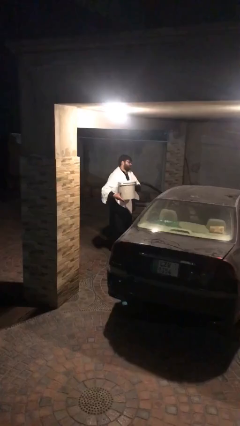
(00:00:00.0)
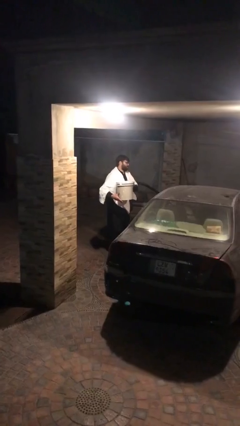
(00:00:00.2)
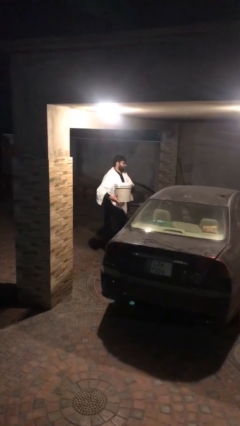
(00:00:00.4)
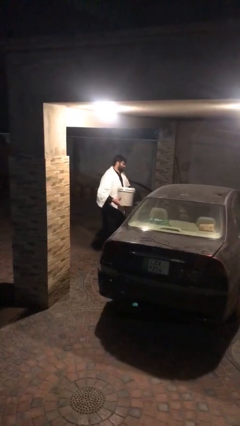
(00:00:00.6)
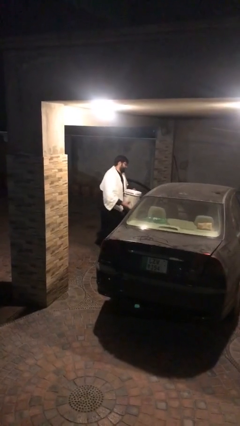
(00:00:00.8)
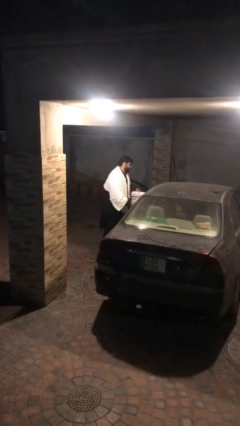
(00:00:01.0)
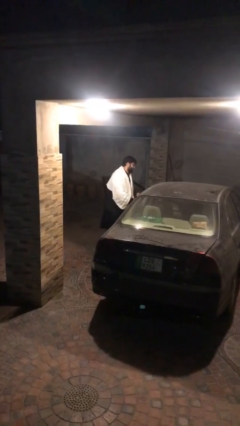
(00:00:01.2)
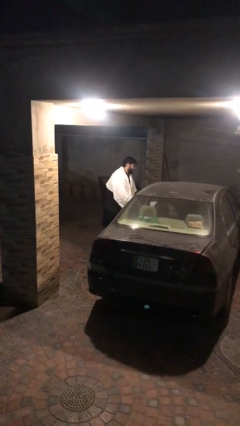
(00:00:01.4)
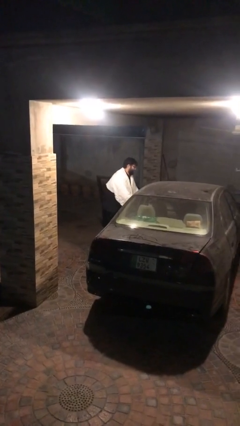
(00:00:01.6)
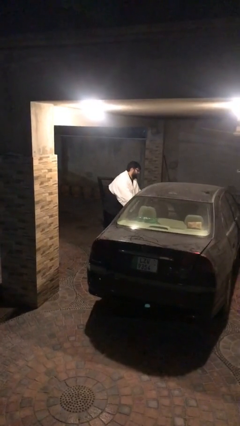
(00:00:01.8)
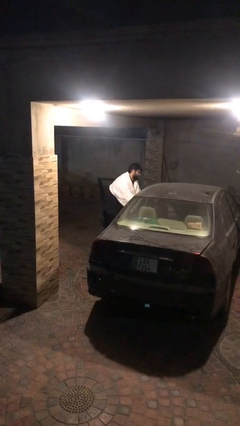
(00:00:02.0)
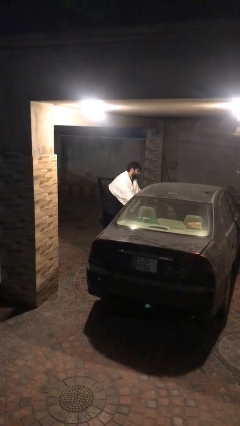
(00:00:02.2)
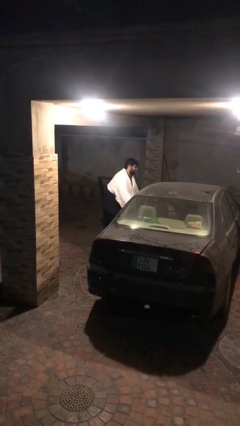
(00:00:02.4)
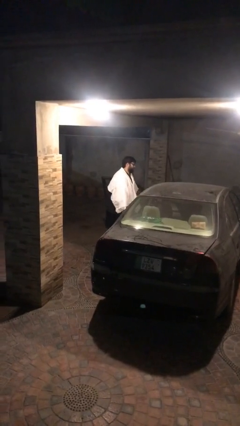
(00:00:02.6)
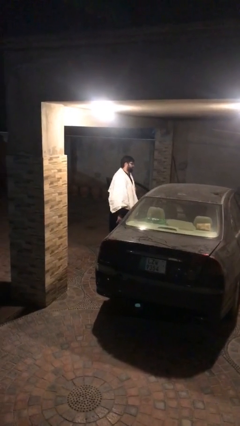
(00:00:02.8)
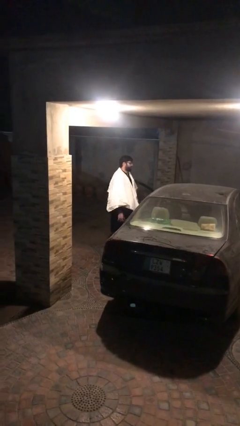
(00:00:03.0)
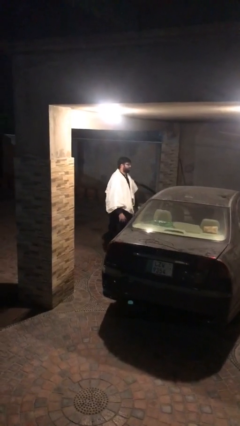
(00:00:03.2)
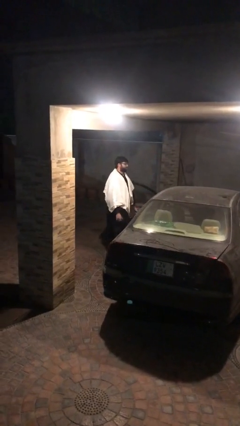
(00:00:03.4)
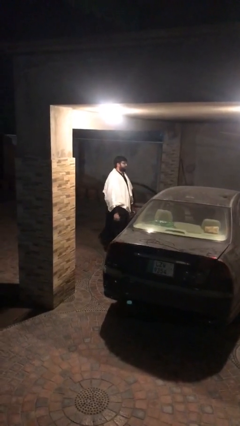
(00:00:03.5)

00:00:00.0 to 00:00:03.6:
person loads car

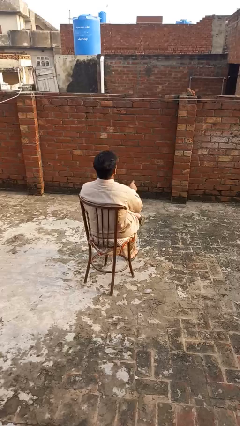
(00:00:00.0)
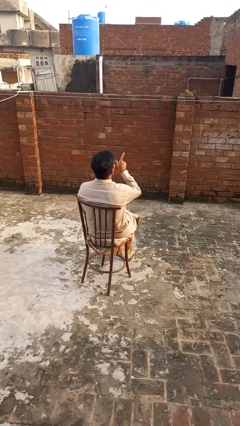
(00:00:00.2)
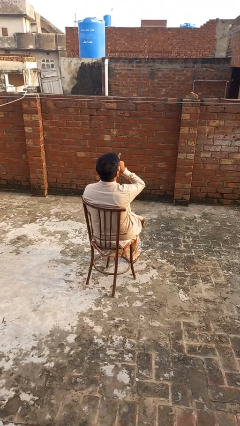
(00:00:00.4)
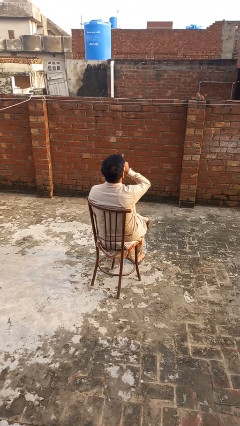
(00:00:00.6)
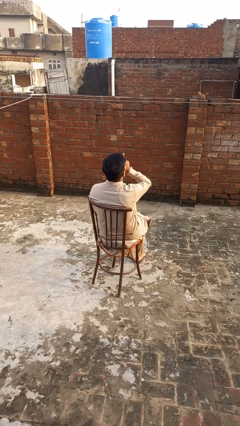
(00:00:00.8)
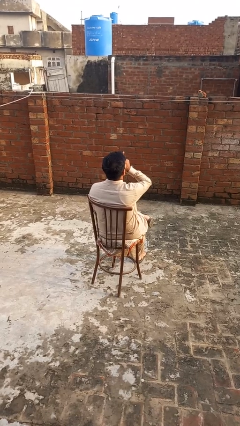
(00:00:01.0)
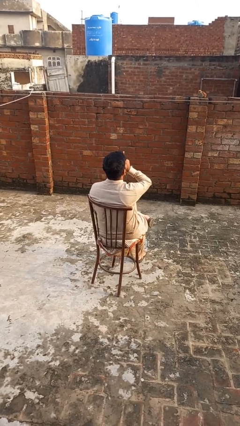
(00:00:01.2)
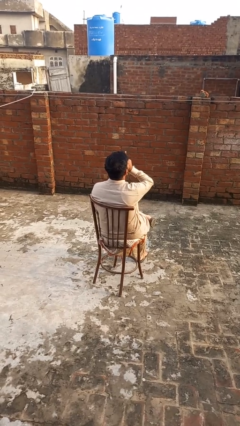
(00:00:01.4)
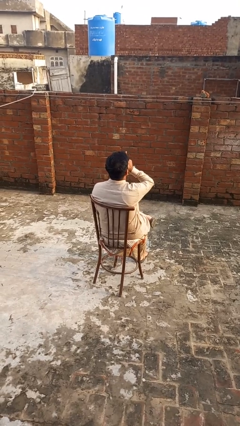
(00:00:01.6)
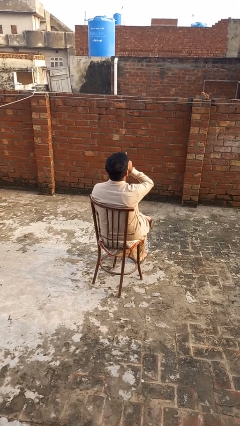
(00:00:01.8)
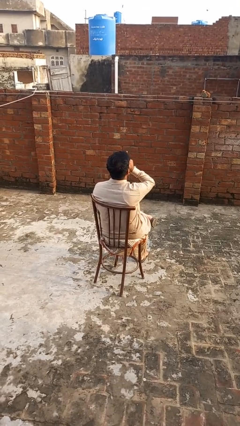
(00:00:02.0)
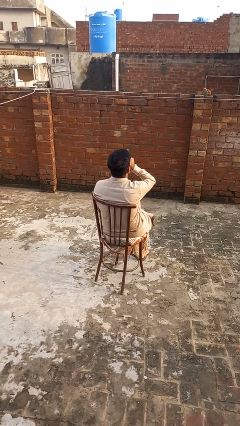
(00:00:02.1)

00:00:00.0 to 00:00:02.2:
person gestures be quiet

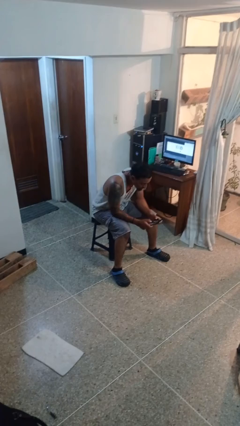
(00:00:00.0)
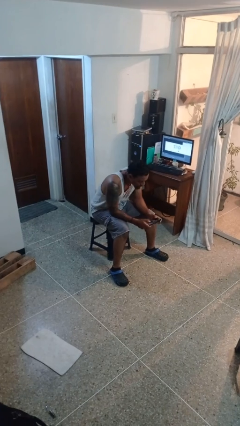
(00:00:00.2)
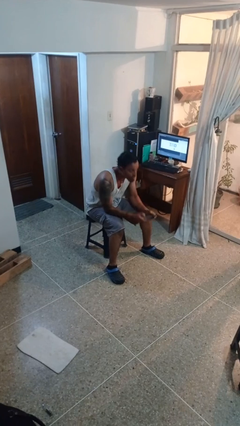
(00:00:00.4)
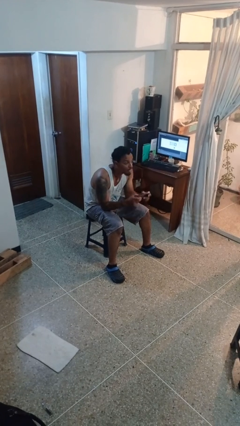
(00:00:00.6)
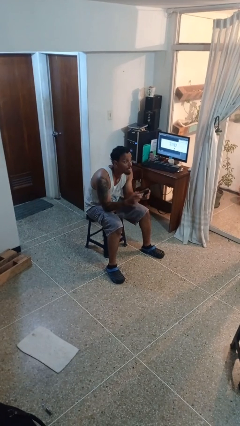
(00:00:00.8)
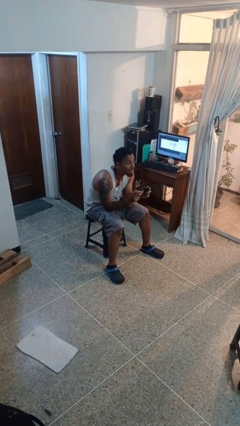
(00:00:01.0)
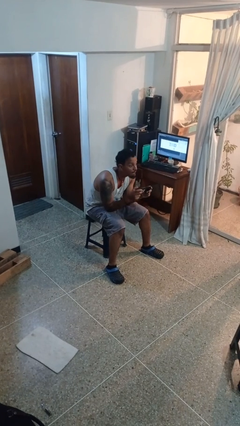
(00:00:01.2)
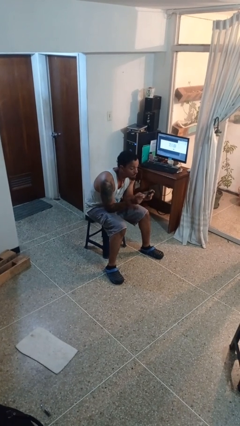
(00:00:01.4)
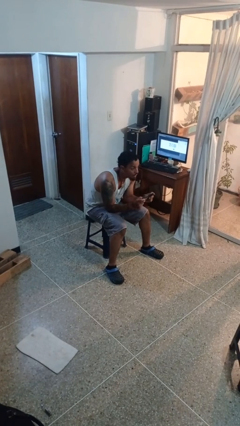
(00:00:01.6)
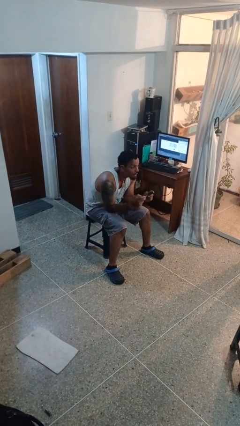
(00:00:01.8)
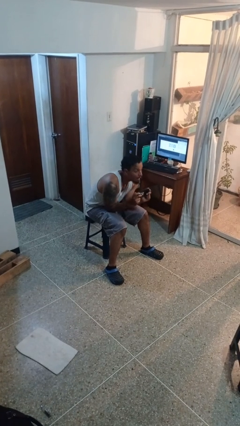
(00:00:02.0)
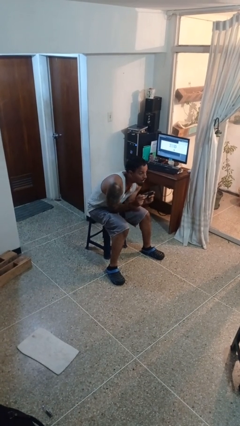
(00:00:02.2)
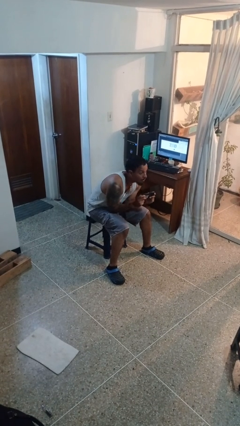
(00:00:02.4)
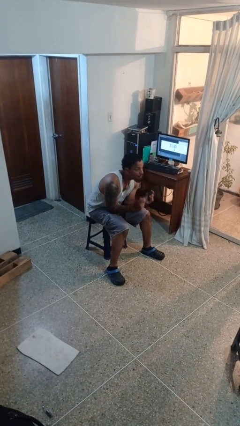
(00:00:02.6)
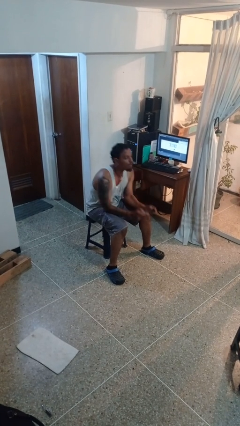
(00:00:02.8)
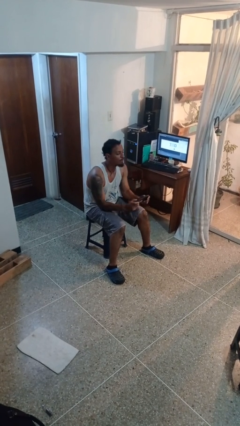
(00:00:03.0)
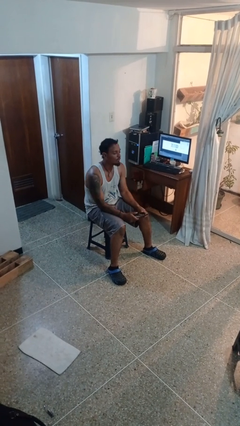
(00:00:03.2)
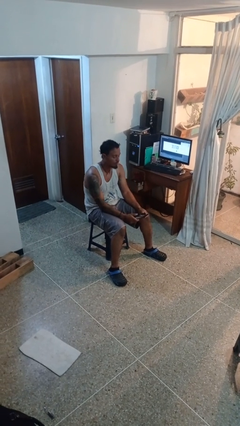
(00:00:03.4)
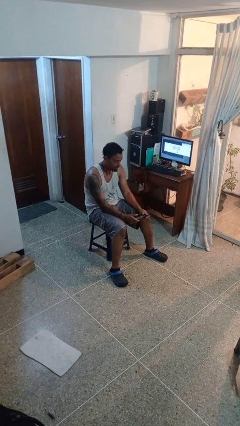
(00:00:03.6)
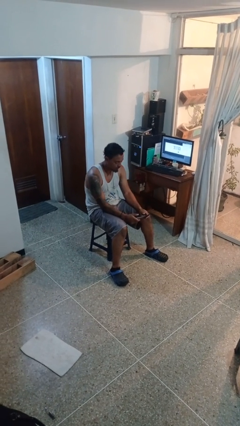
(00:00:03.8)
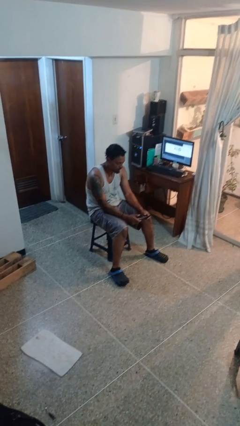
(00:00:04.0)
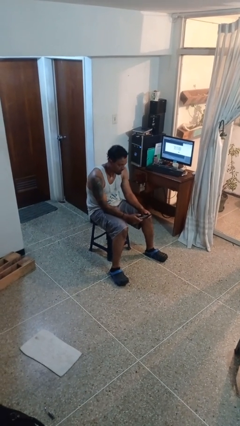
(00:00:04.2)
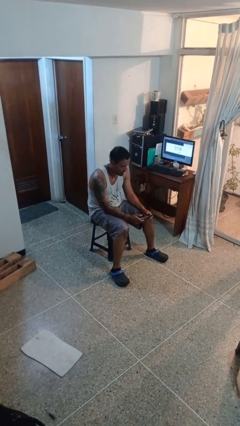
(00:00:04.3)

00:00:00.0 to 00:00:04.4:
person interacts with handheld game

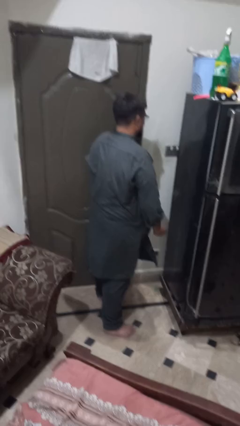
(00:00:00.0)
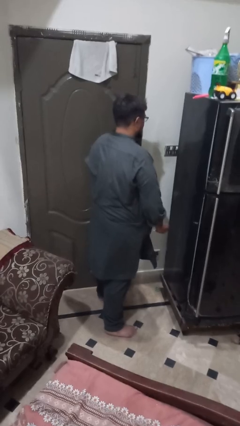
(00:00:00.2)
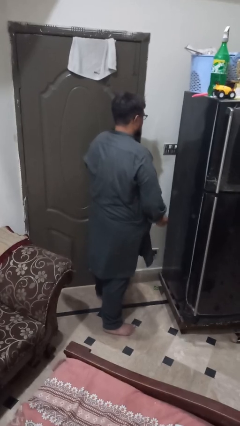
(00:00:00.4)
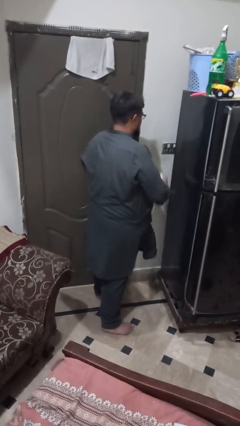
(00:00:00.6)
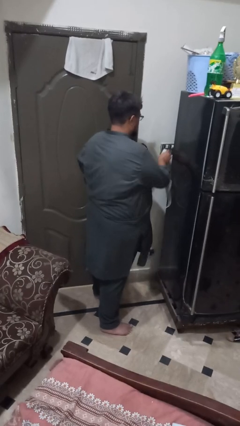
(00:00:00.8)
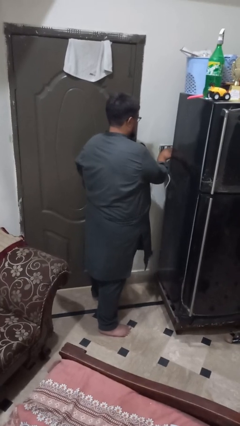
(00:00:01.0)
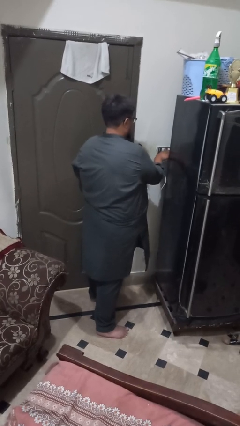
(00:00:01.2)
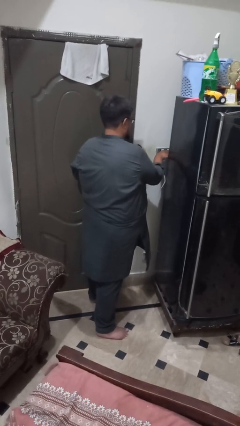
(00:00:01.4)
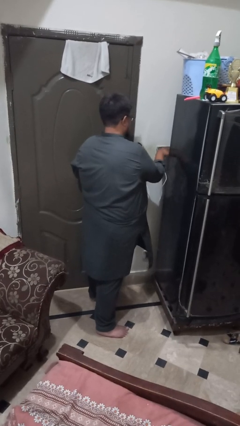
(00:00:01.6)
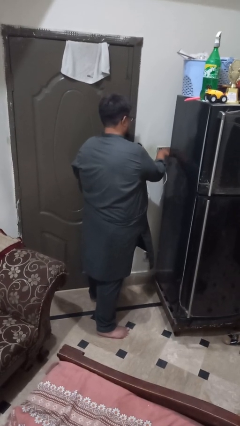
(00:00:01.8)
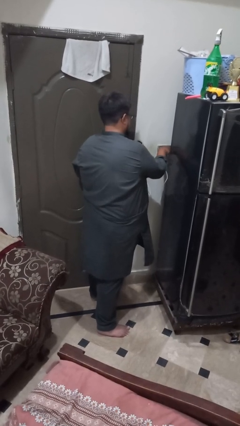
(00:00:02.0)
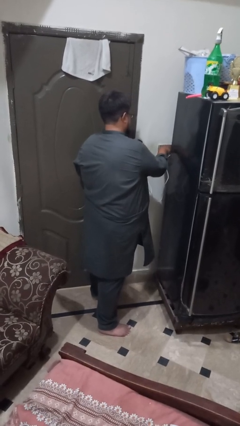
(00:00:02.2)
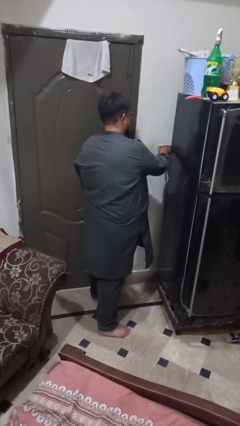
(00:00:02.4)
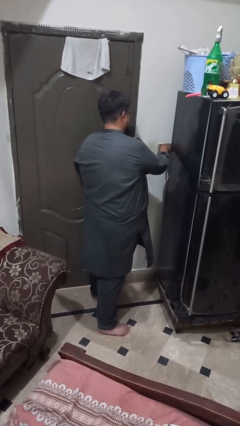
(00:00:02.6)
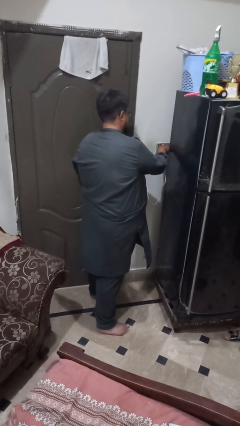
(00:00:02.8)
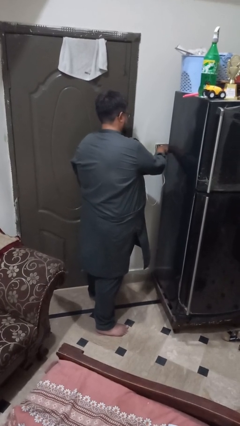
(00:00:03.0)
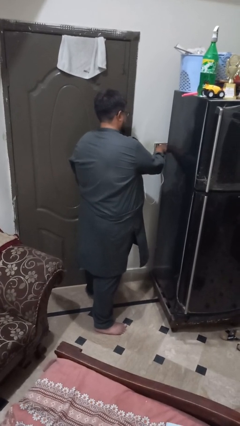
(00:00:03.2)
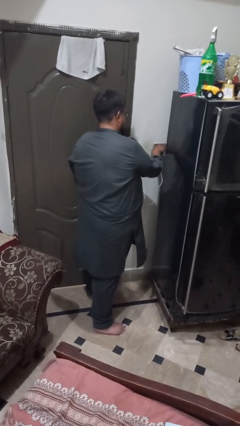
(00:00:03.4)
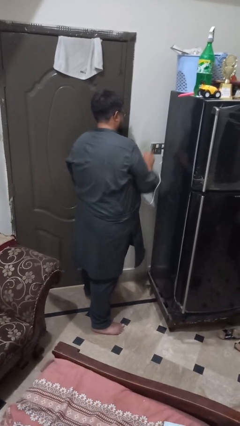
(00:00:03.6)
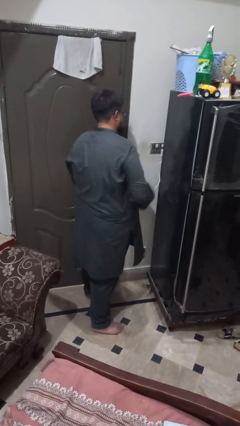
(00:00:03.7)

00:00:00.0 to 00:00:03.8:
person plugs into electrical socket

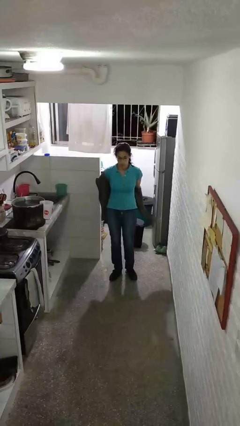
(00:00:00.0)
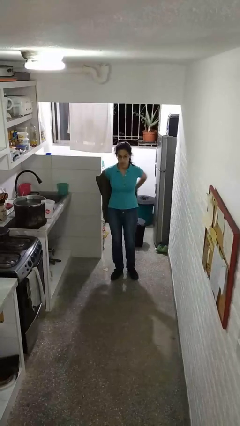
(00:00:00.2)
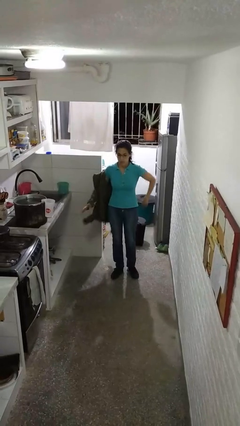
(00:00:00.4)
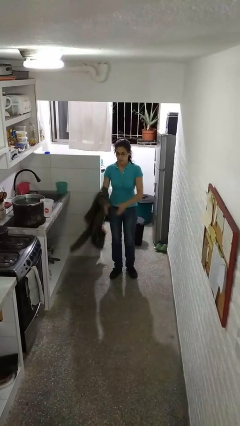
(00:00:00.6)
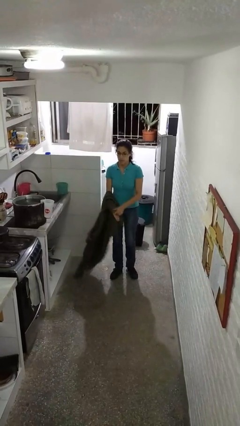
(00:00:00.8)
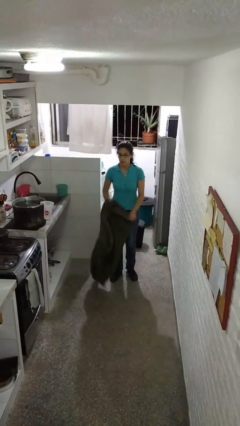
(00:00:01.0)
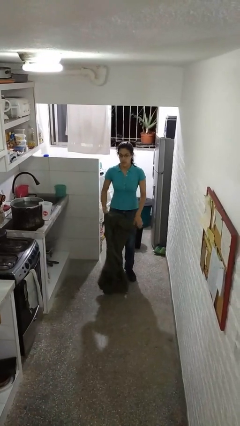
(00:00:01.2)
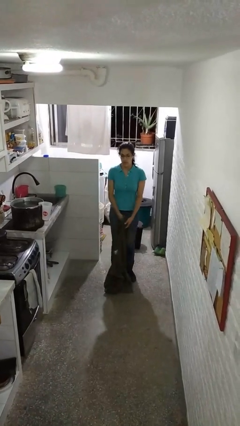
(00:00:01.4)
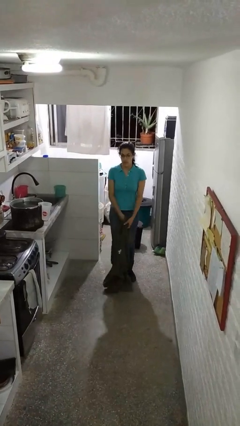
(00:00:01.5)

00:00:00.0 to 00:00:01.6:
person takes off jacket

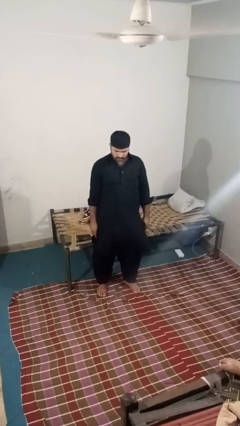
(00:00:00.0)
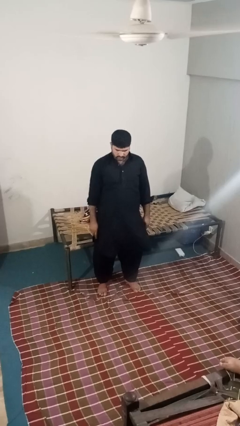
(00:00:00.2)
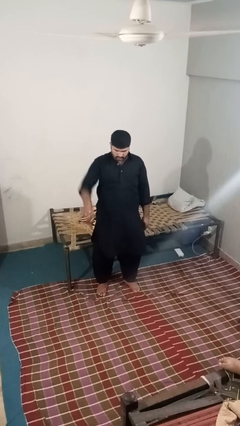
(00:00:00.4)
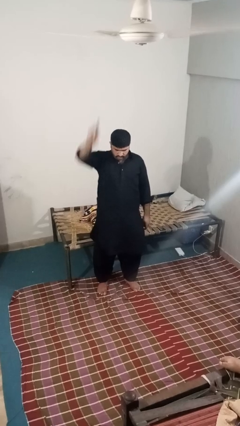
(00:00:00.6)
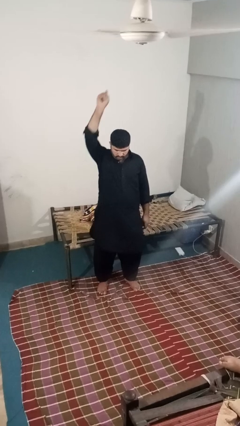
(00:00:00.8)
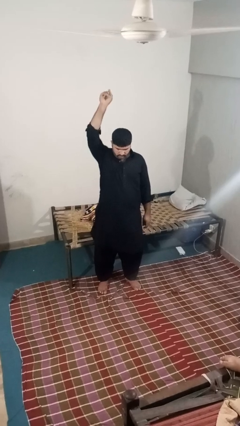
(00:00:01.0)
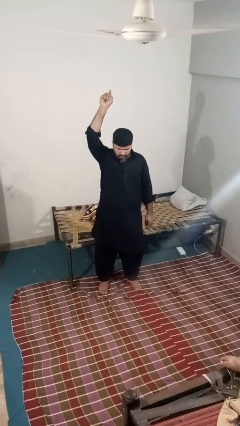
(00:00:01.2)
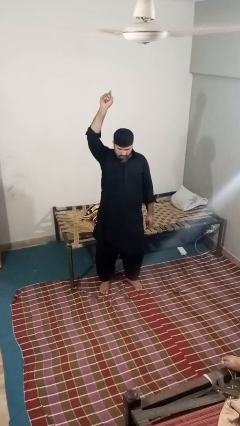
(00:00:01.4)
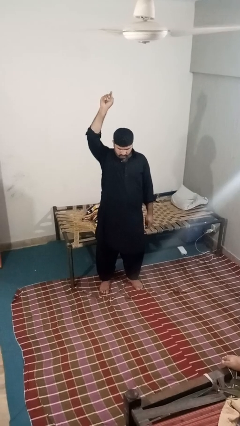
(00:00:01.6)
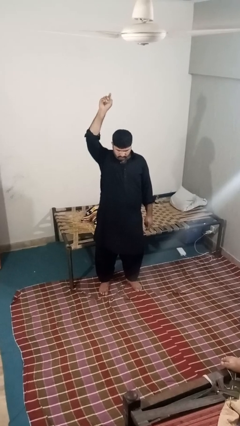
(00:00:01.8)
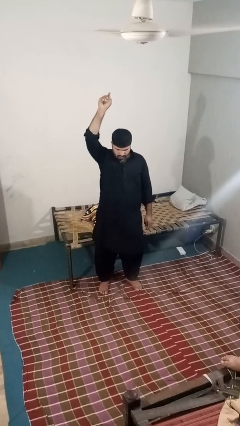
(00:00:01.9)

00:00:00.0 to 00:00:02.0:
person gestures swipe up
